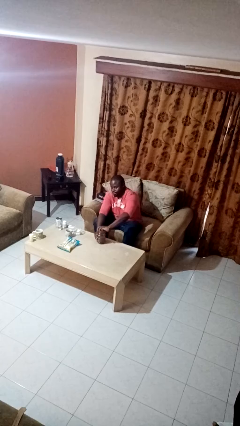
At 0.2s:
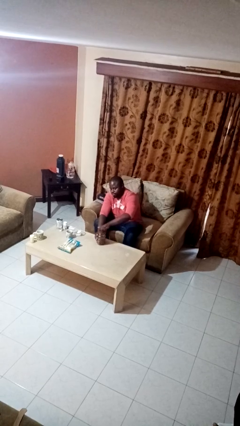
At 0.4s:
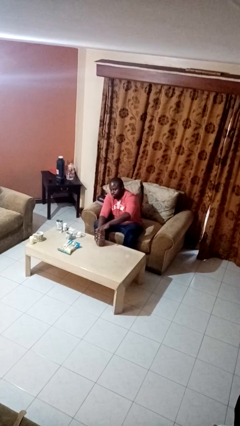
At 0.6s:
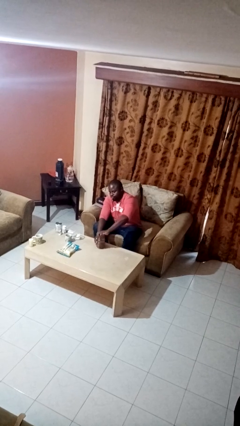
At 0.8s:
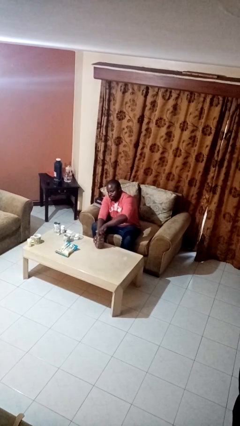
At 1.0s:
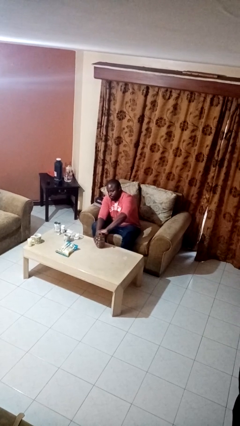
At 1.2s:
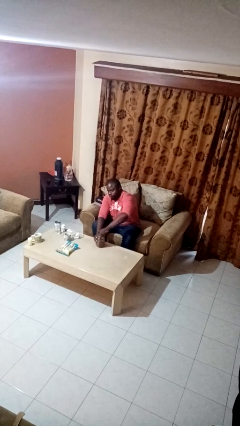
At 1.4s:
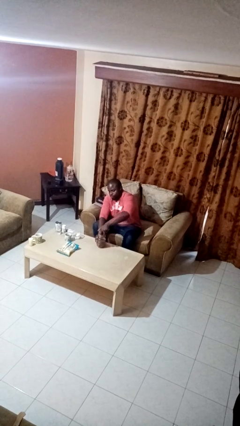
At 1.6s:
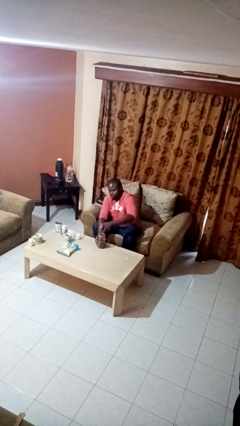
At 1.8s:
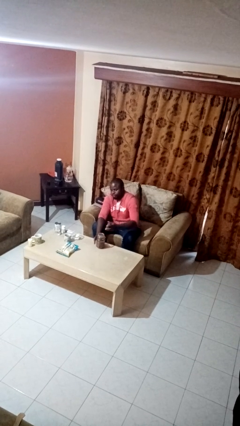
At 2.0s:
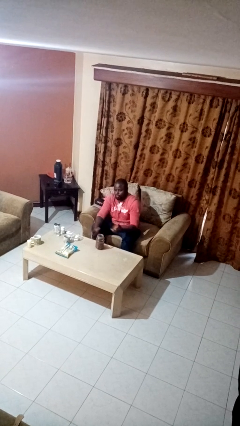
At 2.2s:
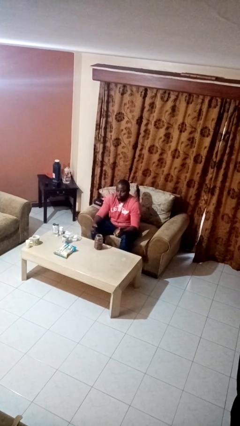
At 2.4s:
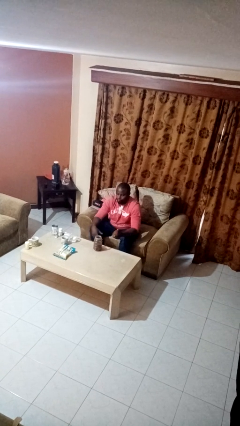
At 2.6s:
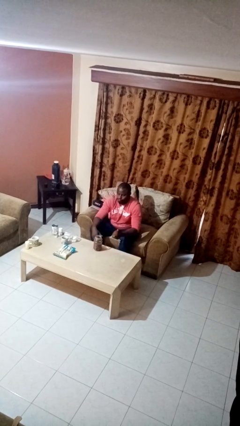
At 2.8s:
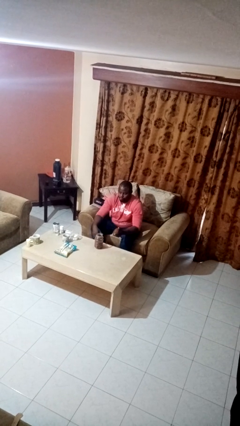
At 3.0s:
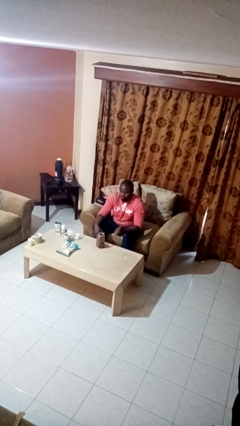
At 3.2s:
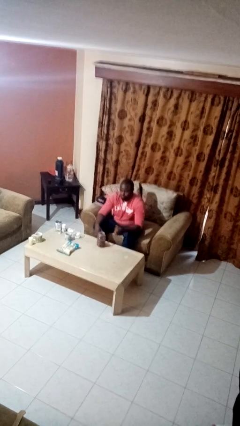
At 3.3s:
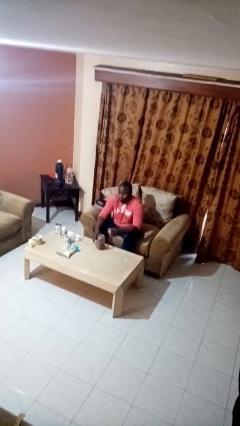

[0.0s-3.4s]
person opens jar

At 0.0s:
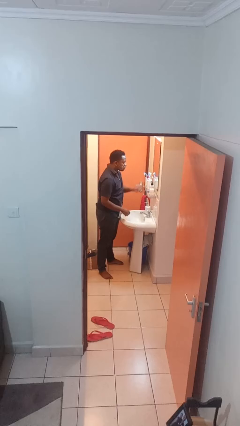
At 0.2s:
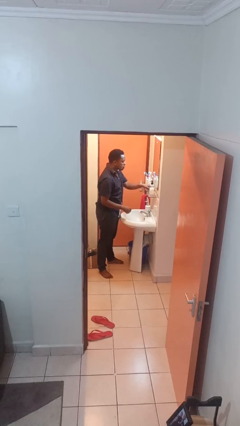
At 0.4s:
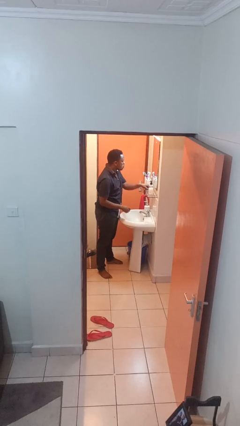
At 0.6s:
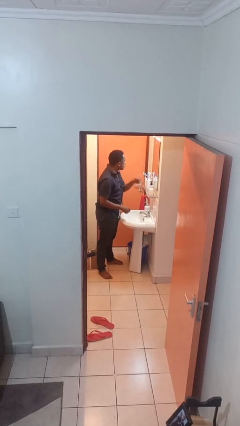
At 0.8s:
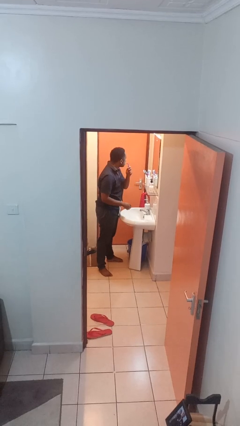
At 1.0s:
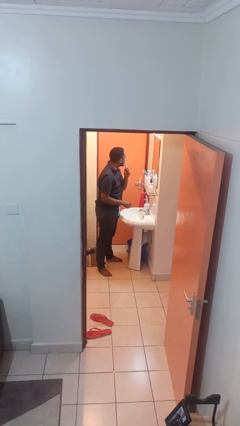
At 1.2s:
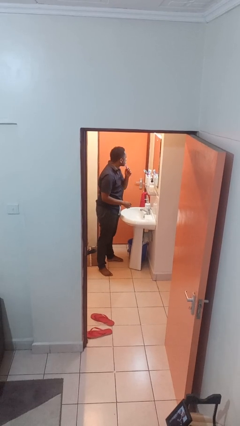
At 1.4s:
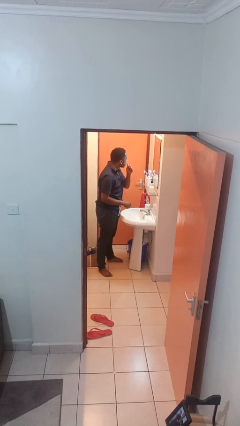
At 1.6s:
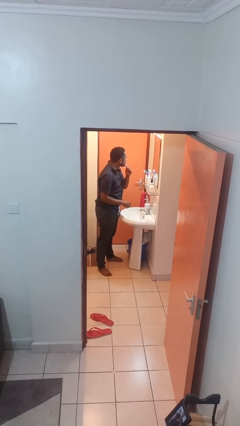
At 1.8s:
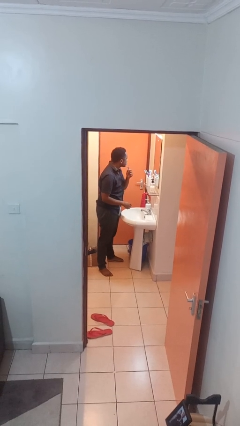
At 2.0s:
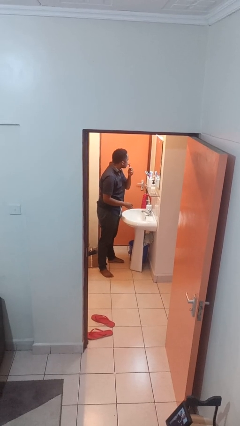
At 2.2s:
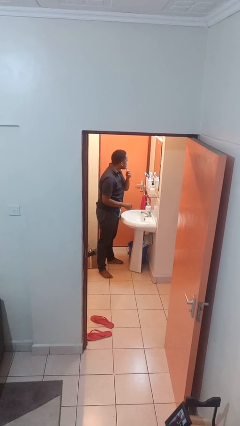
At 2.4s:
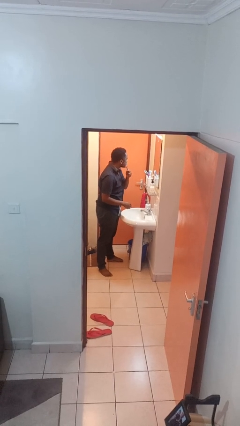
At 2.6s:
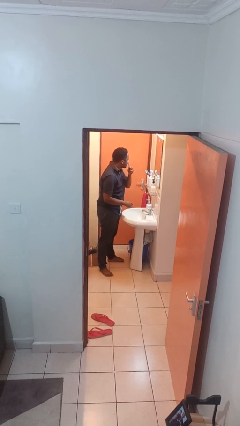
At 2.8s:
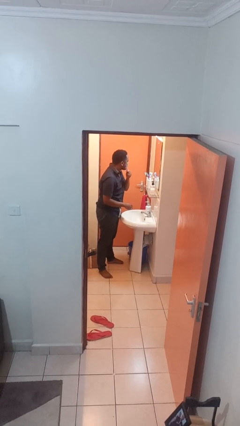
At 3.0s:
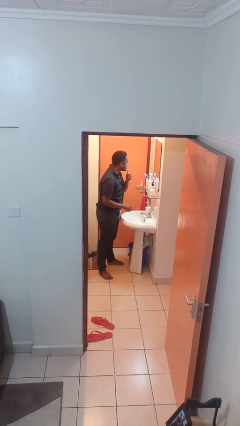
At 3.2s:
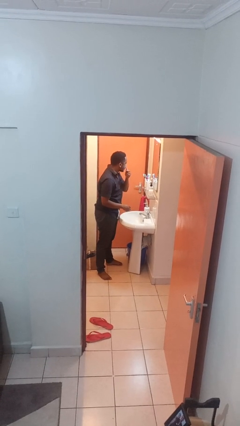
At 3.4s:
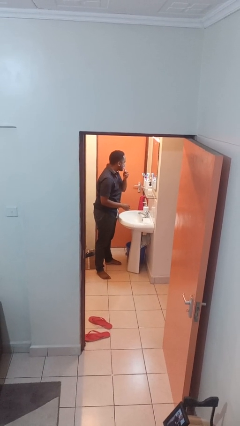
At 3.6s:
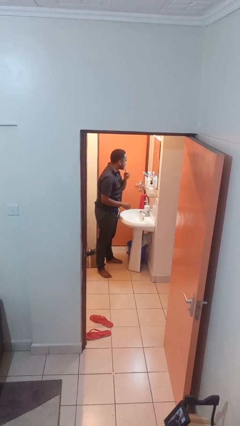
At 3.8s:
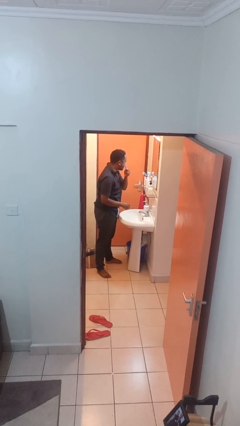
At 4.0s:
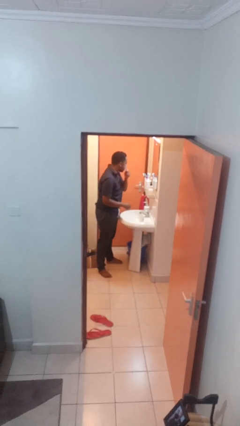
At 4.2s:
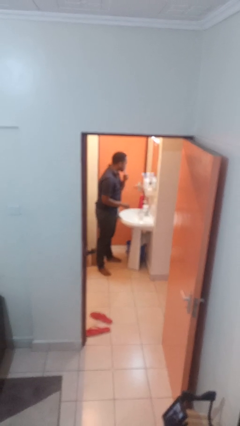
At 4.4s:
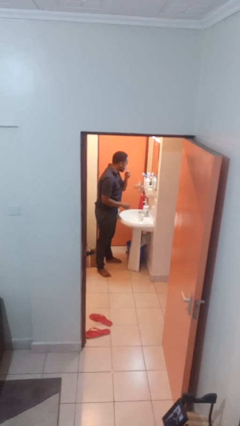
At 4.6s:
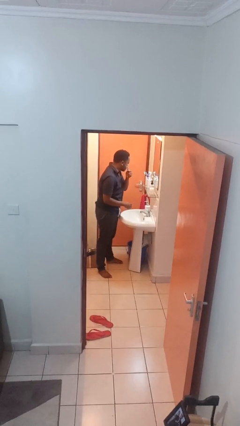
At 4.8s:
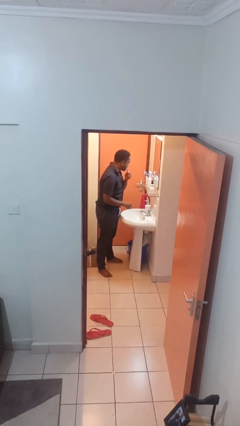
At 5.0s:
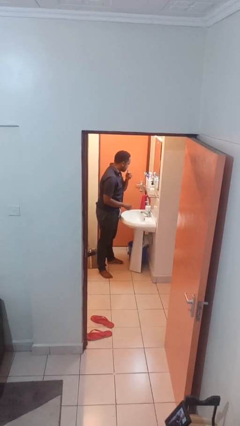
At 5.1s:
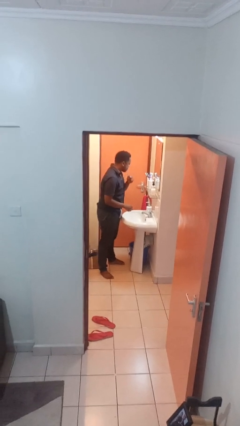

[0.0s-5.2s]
person shaves face

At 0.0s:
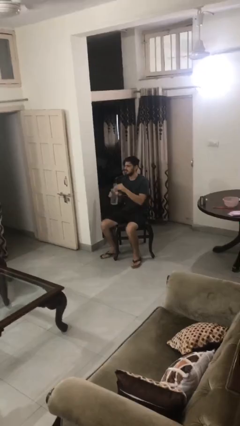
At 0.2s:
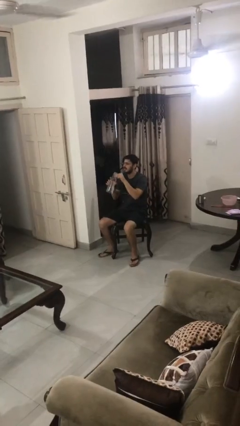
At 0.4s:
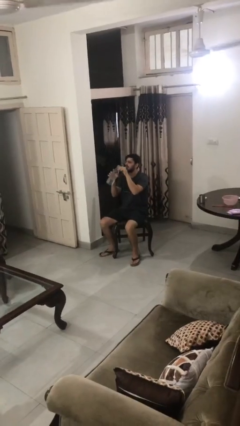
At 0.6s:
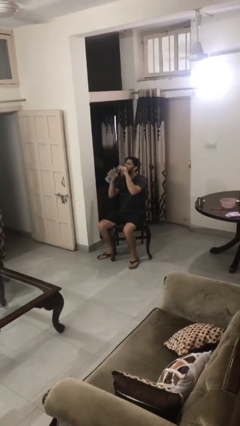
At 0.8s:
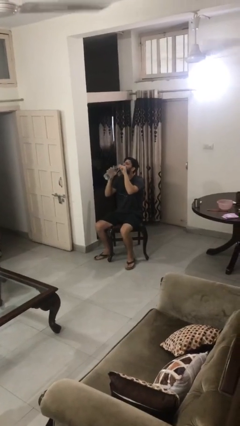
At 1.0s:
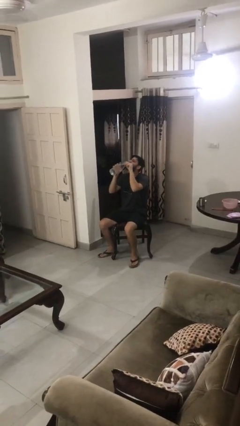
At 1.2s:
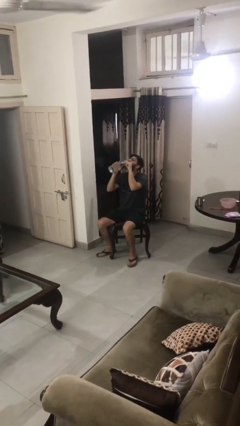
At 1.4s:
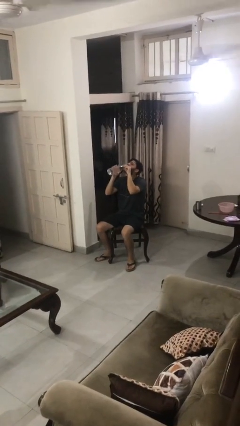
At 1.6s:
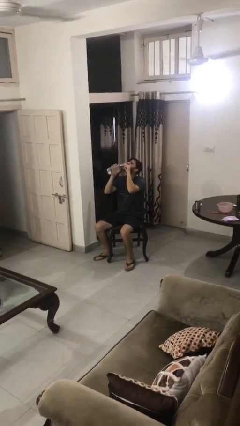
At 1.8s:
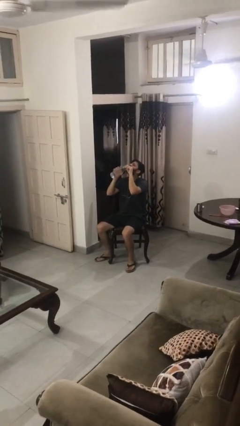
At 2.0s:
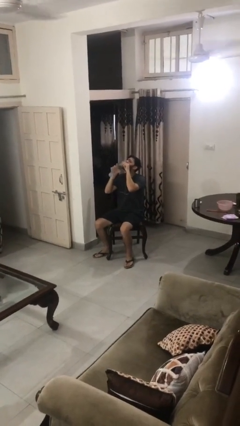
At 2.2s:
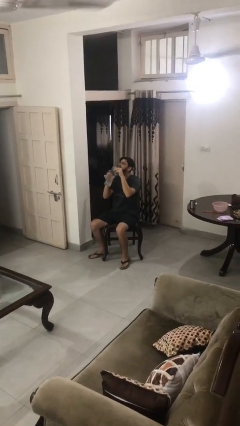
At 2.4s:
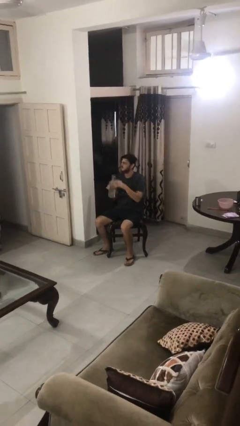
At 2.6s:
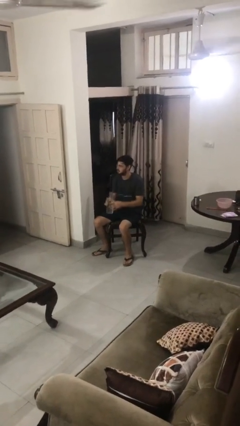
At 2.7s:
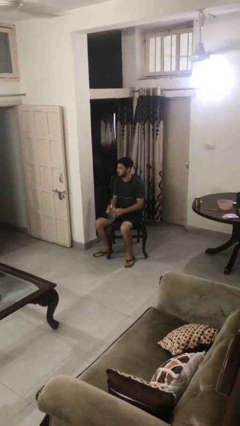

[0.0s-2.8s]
person drinks from bottle

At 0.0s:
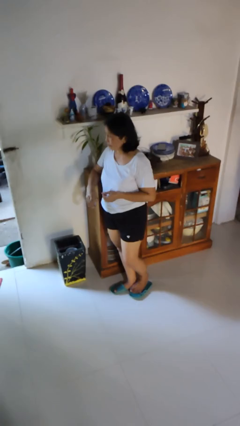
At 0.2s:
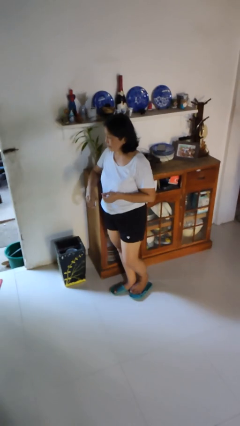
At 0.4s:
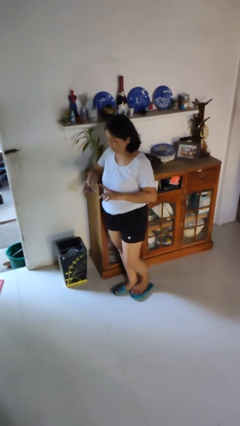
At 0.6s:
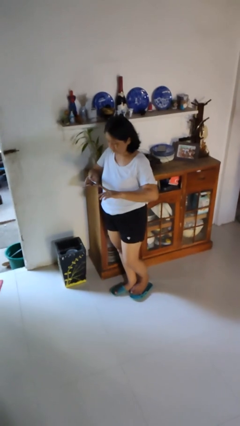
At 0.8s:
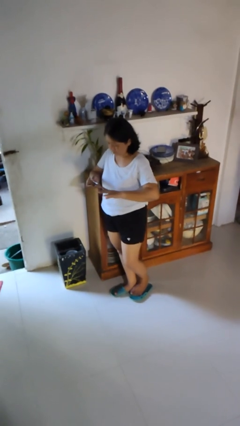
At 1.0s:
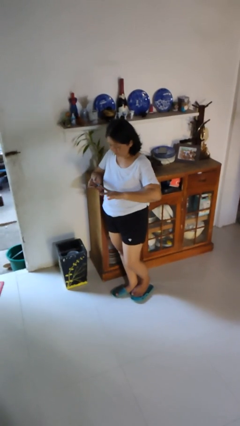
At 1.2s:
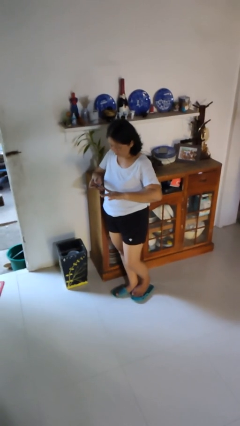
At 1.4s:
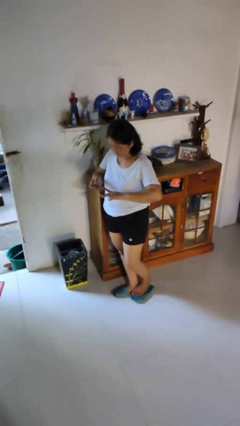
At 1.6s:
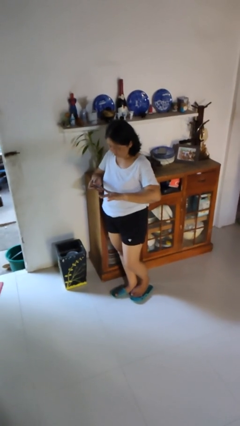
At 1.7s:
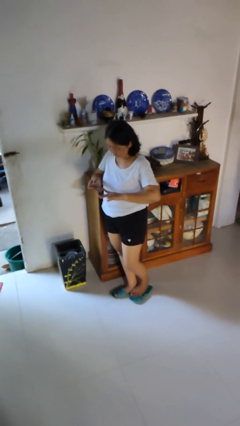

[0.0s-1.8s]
person clips fingernails

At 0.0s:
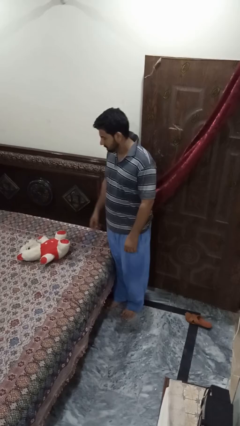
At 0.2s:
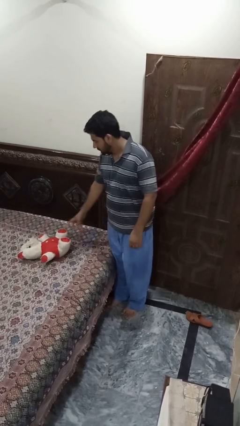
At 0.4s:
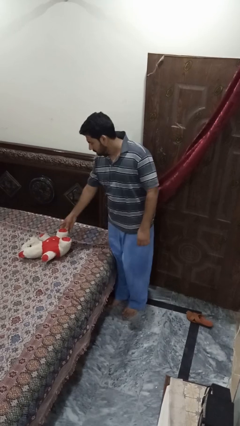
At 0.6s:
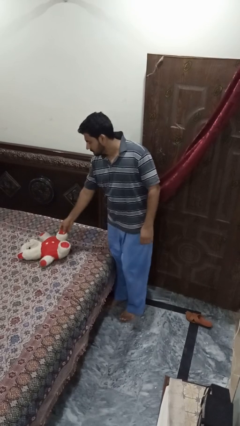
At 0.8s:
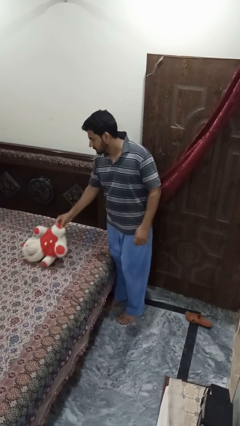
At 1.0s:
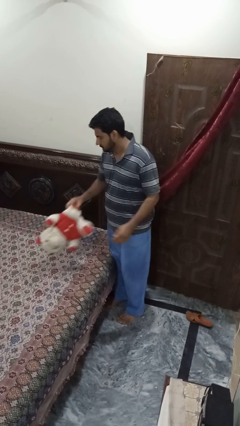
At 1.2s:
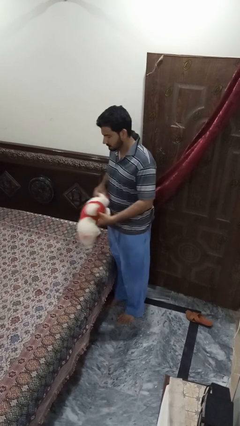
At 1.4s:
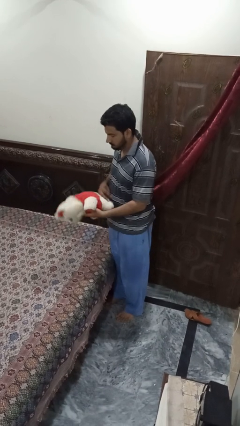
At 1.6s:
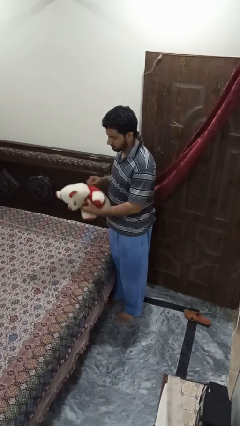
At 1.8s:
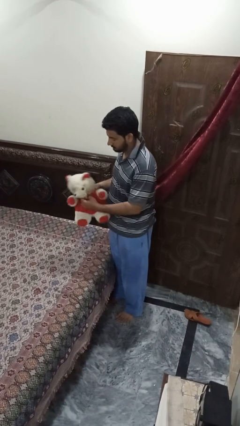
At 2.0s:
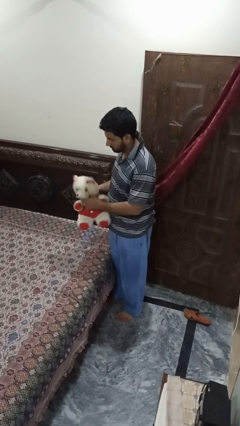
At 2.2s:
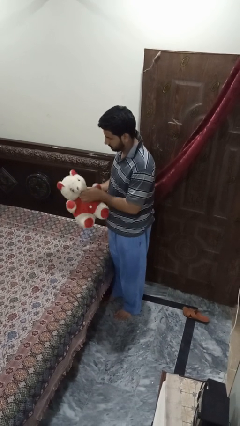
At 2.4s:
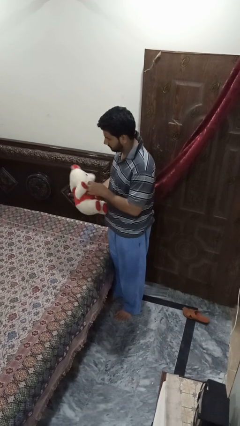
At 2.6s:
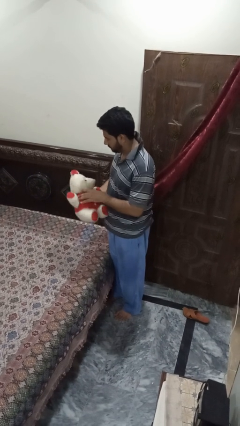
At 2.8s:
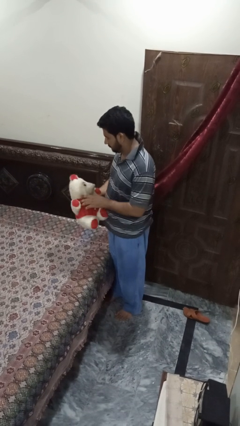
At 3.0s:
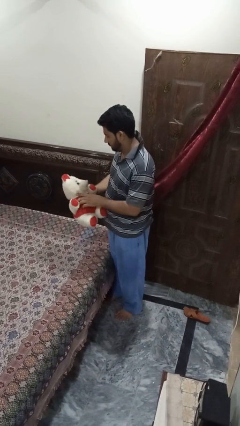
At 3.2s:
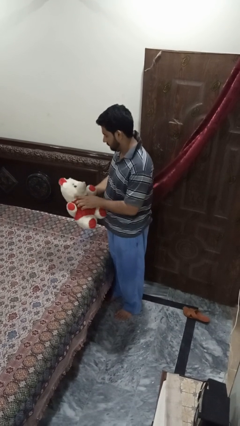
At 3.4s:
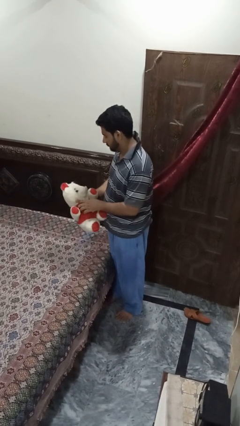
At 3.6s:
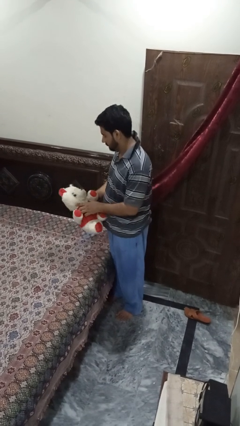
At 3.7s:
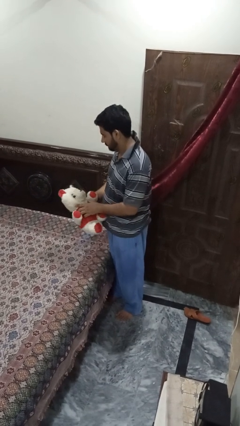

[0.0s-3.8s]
person picks up object from bed

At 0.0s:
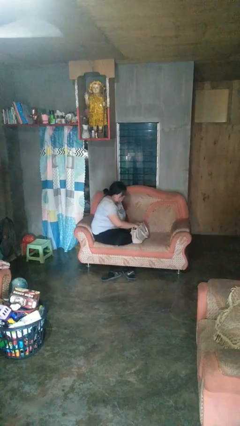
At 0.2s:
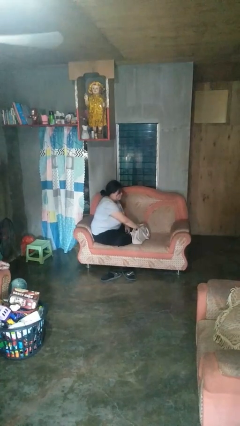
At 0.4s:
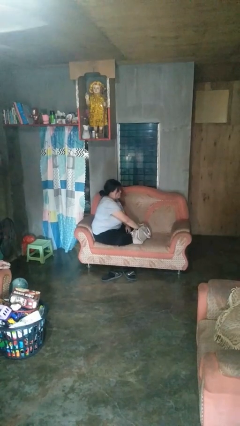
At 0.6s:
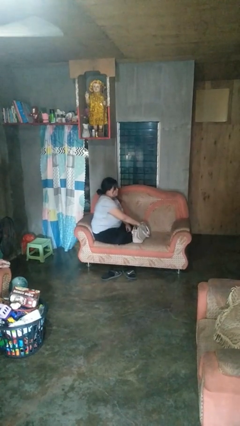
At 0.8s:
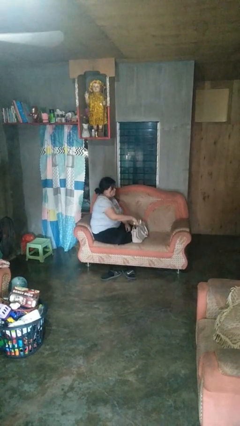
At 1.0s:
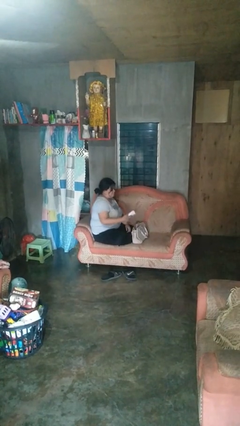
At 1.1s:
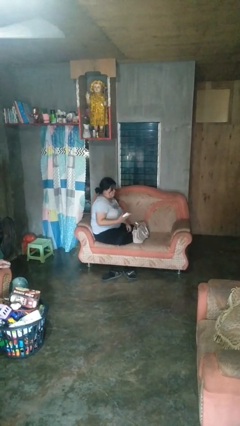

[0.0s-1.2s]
person takes object from purse
